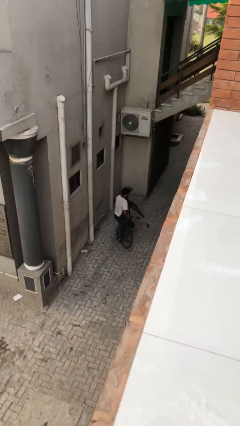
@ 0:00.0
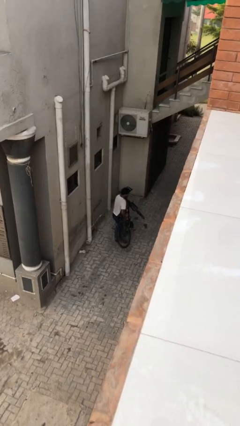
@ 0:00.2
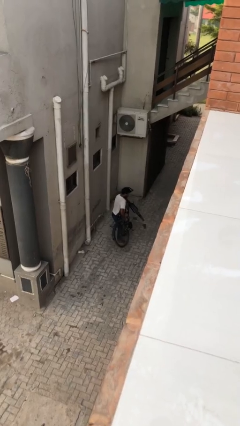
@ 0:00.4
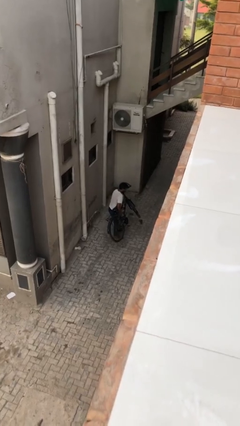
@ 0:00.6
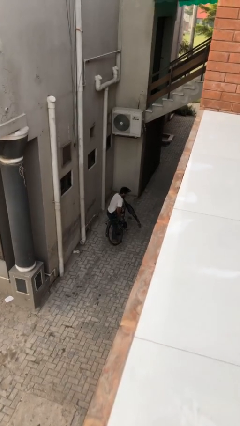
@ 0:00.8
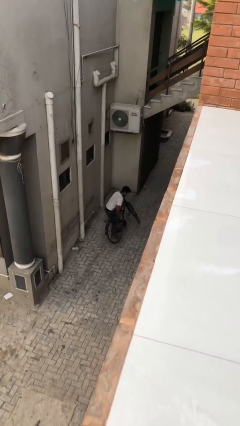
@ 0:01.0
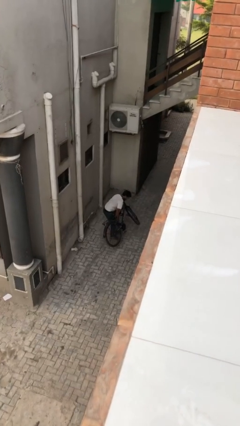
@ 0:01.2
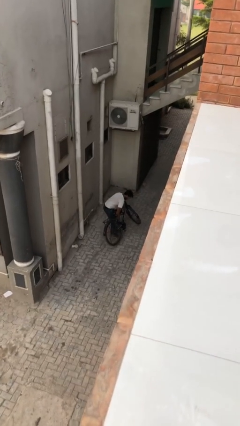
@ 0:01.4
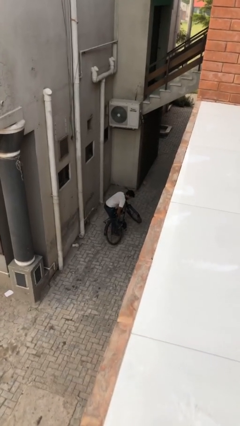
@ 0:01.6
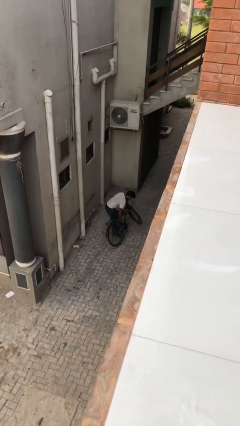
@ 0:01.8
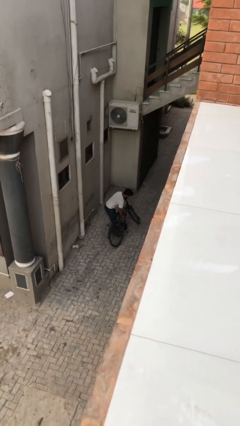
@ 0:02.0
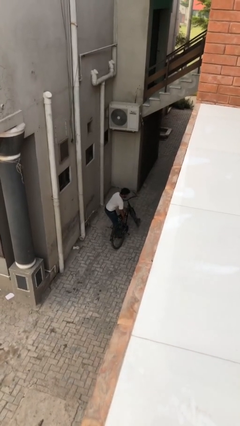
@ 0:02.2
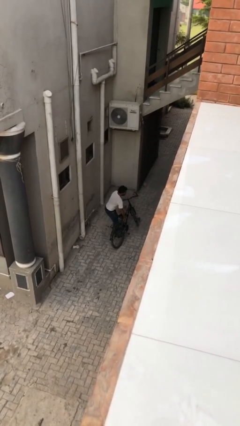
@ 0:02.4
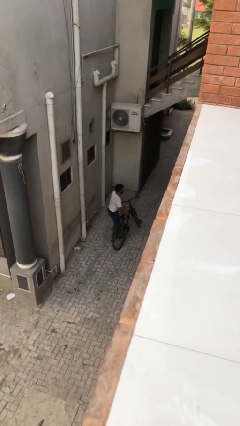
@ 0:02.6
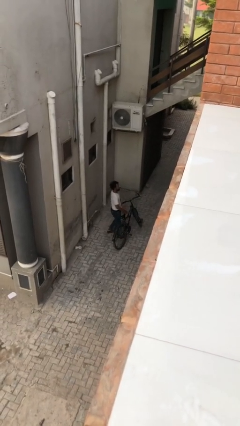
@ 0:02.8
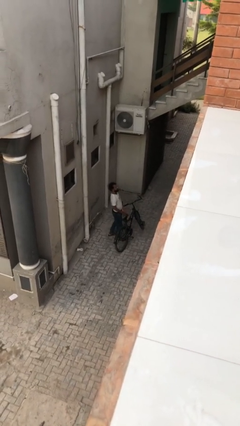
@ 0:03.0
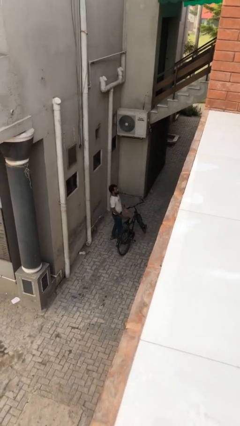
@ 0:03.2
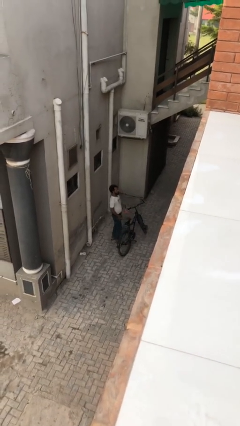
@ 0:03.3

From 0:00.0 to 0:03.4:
person puts down object on floor

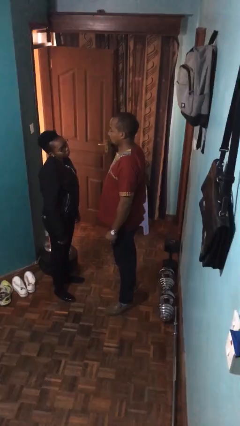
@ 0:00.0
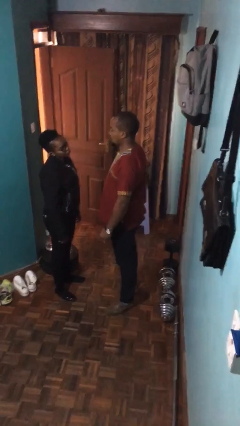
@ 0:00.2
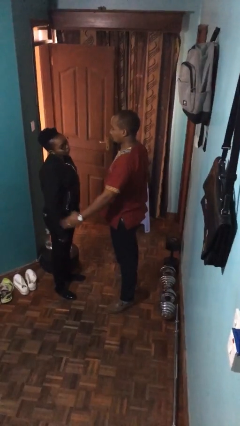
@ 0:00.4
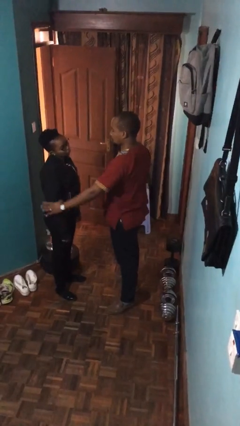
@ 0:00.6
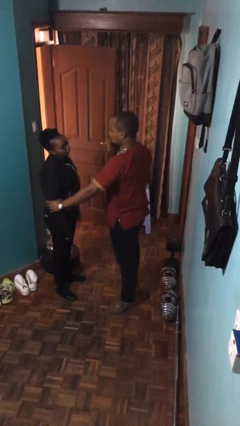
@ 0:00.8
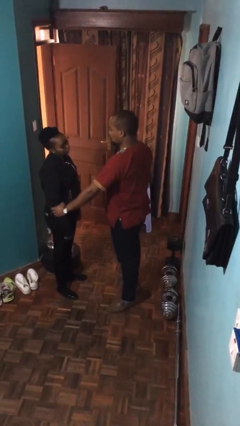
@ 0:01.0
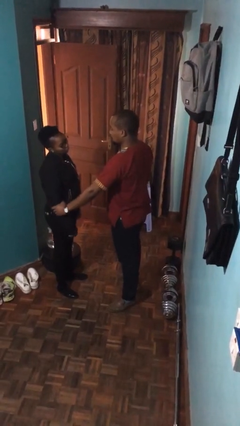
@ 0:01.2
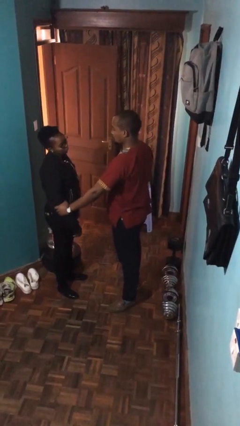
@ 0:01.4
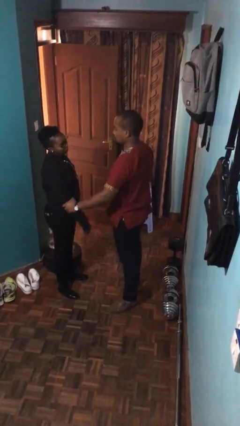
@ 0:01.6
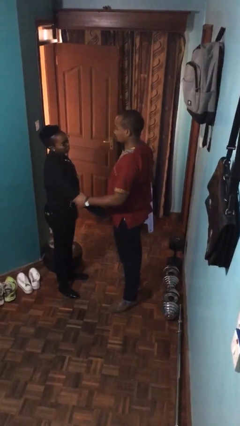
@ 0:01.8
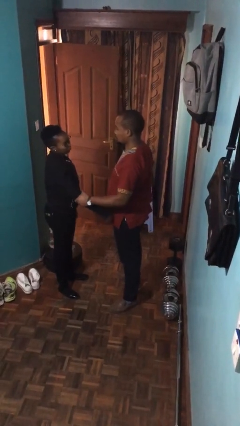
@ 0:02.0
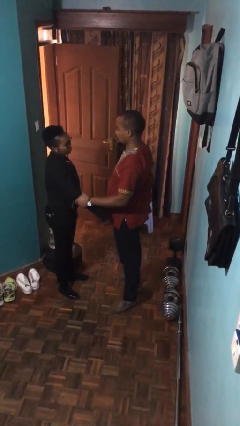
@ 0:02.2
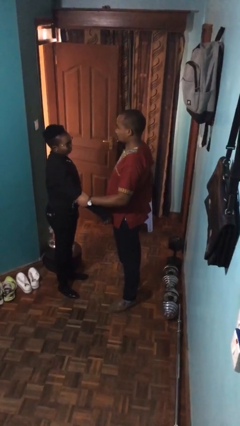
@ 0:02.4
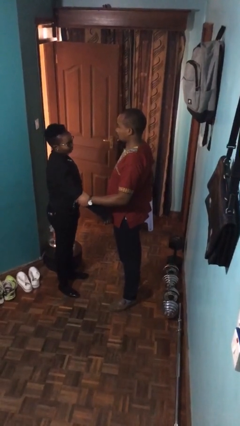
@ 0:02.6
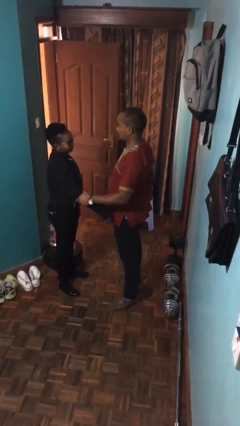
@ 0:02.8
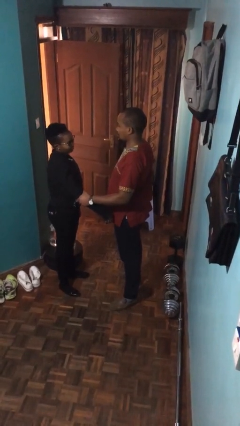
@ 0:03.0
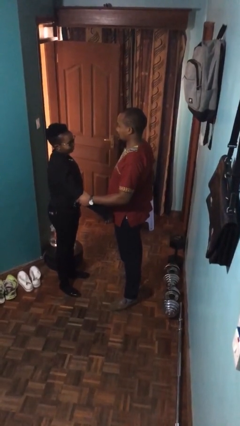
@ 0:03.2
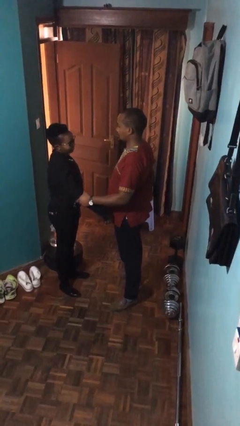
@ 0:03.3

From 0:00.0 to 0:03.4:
person grabs person by forearm

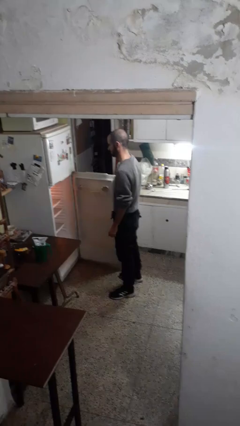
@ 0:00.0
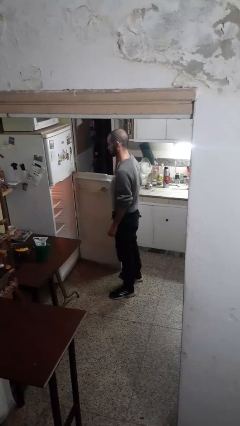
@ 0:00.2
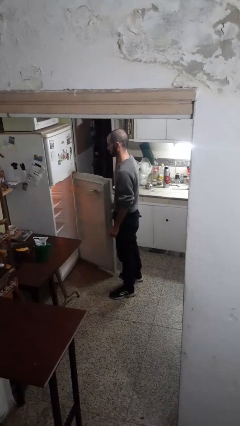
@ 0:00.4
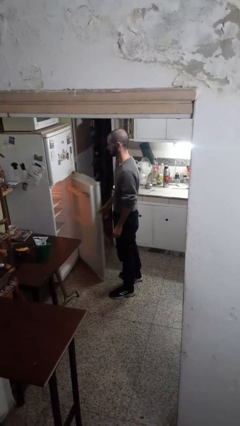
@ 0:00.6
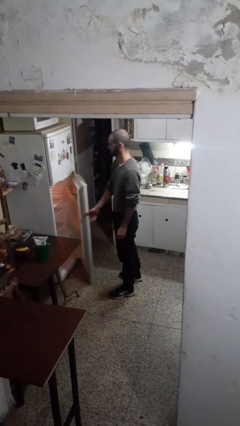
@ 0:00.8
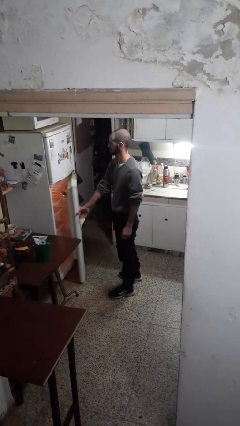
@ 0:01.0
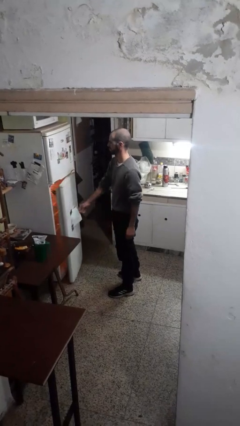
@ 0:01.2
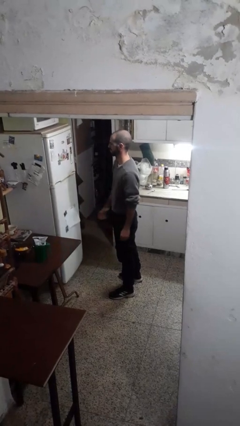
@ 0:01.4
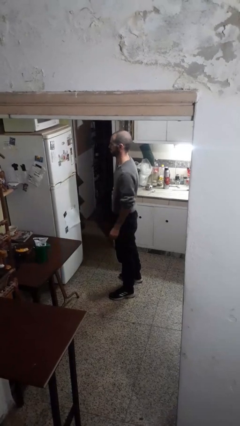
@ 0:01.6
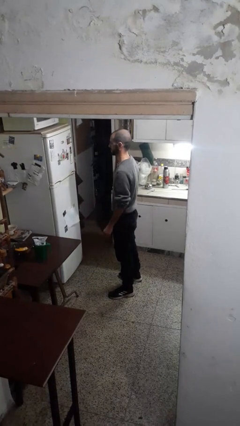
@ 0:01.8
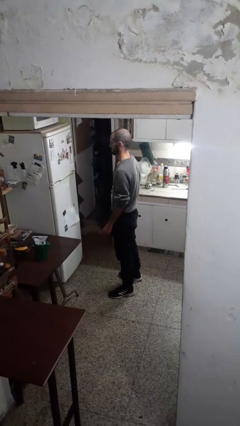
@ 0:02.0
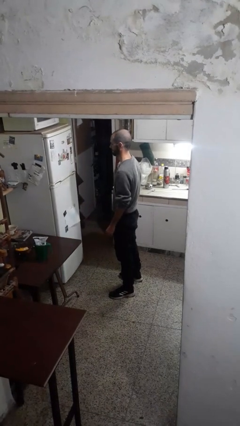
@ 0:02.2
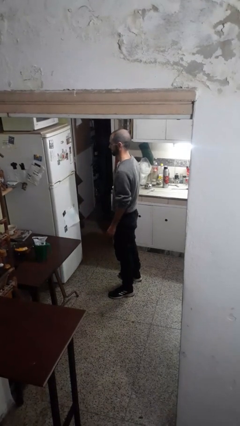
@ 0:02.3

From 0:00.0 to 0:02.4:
person closes refrigerator

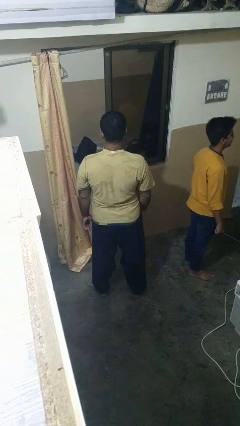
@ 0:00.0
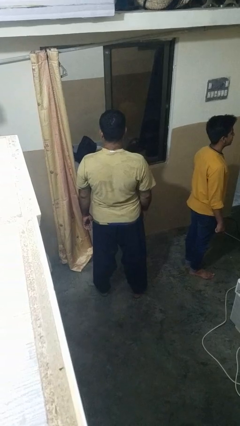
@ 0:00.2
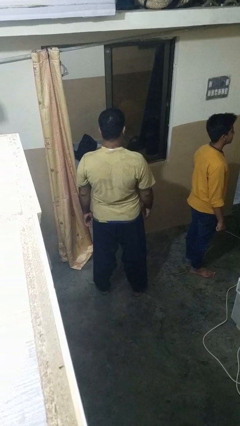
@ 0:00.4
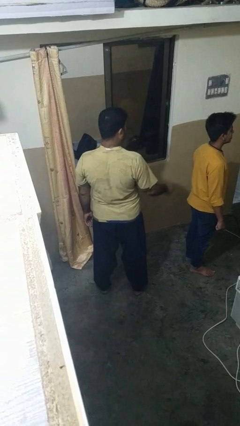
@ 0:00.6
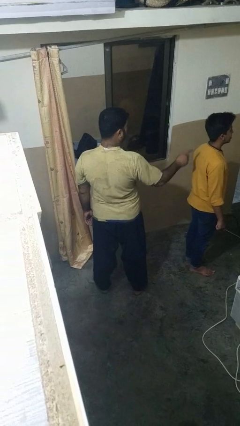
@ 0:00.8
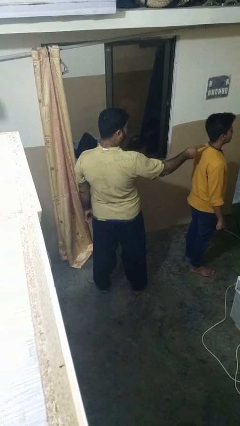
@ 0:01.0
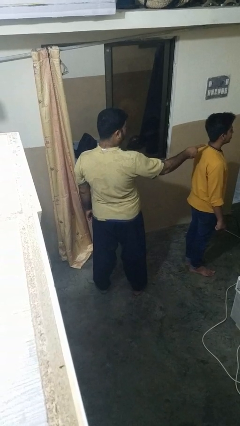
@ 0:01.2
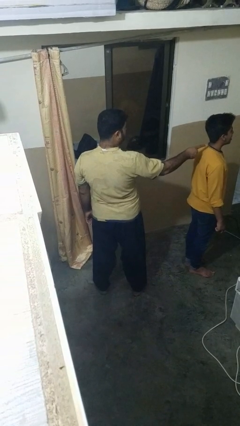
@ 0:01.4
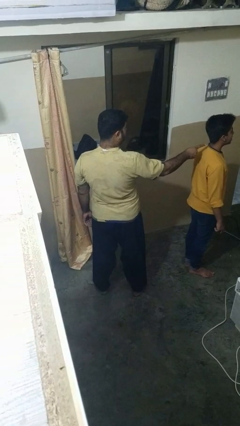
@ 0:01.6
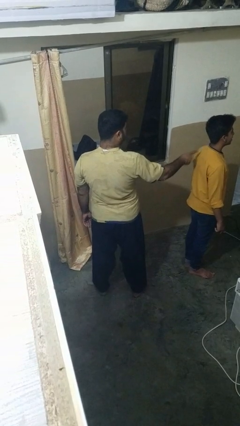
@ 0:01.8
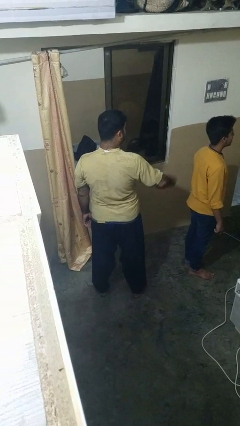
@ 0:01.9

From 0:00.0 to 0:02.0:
person points at person

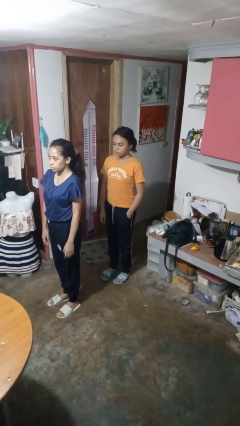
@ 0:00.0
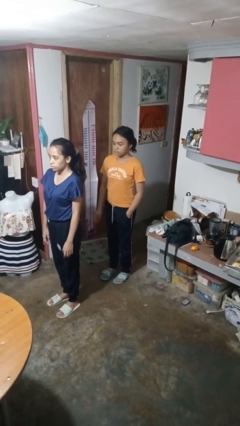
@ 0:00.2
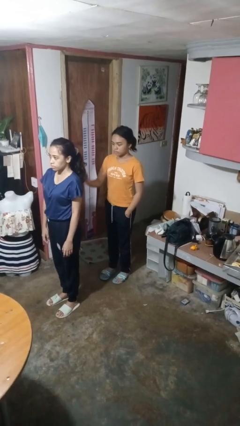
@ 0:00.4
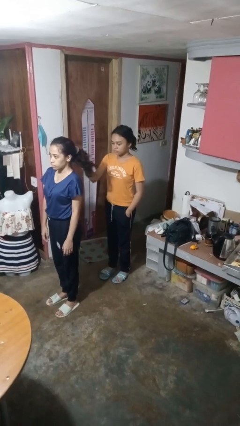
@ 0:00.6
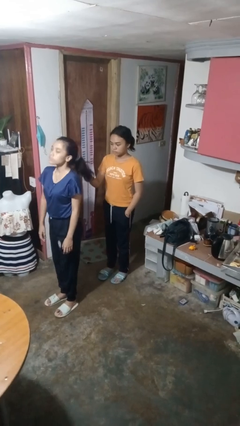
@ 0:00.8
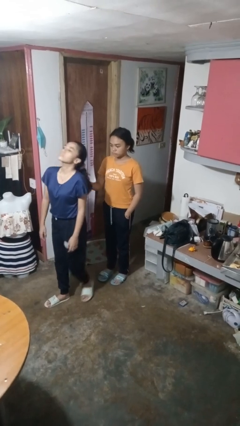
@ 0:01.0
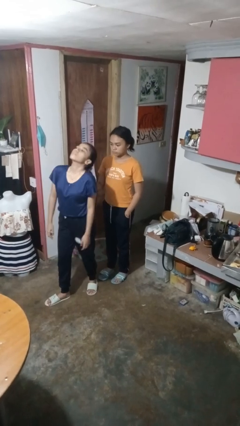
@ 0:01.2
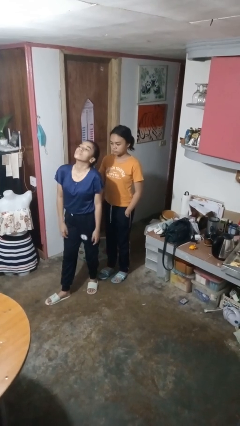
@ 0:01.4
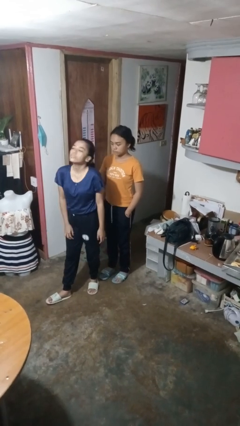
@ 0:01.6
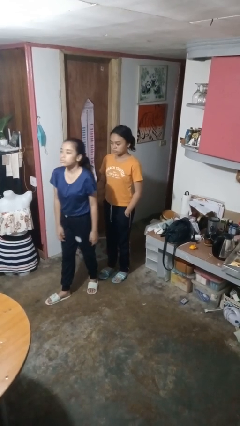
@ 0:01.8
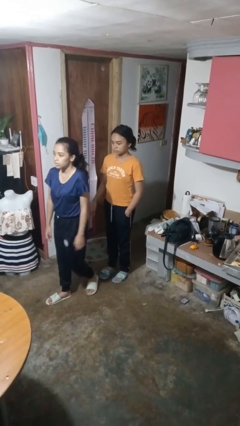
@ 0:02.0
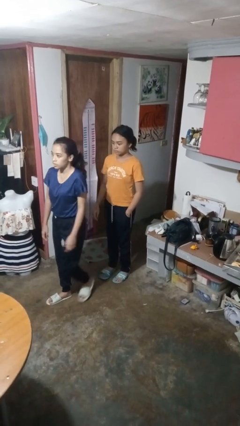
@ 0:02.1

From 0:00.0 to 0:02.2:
person grabs person by hair

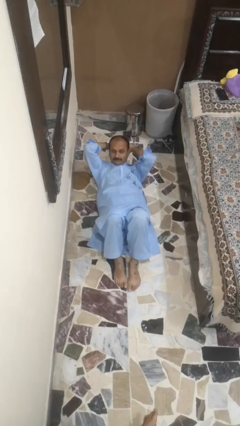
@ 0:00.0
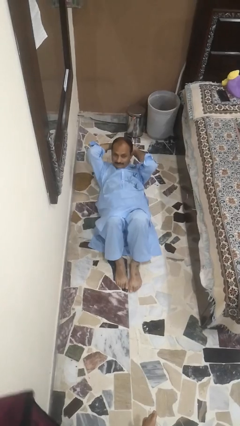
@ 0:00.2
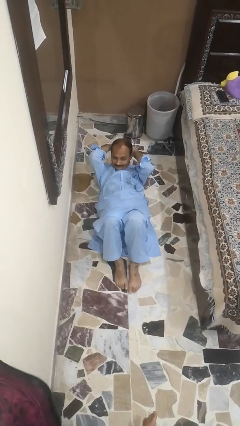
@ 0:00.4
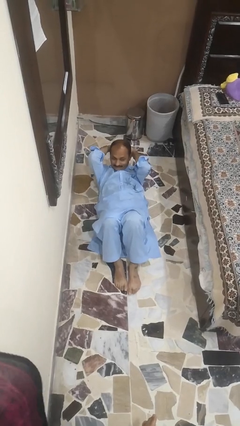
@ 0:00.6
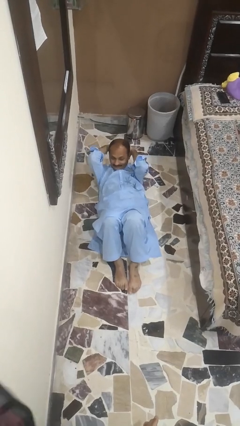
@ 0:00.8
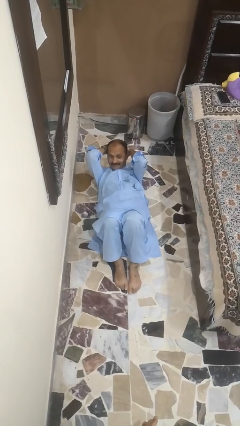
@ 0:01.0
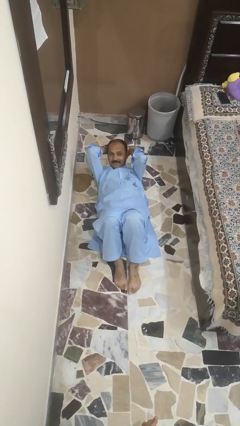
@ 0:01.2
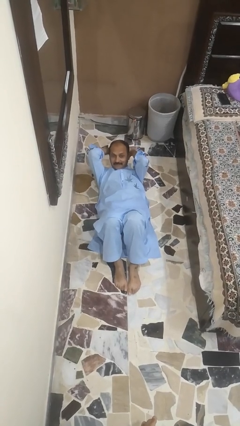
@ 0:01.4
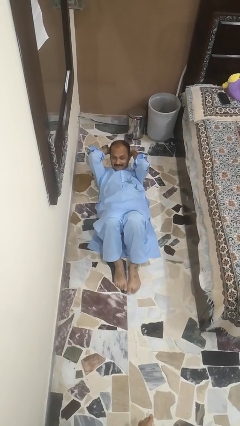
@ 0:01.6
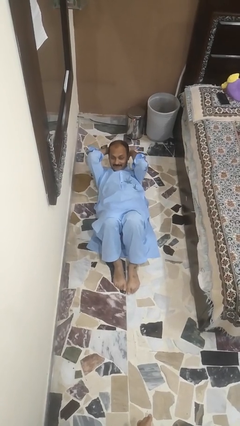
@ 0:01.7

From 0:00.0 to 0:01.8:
person exercises with situp

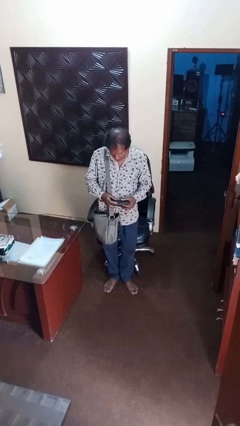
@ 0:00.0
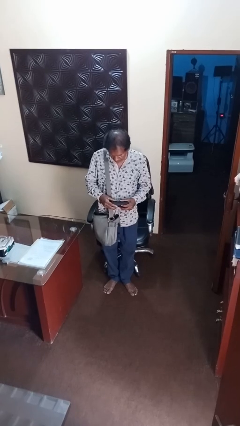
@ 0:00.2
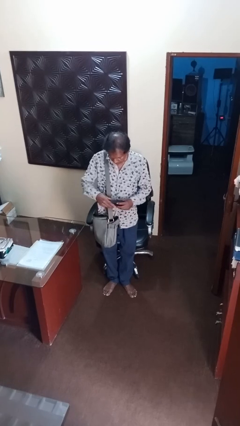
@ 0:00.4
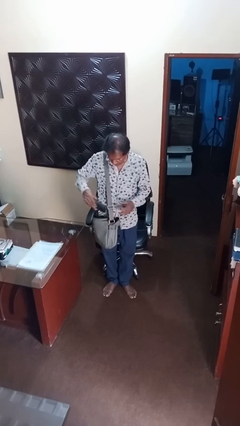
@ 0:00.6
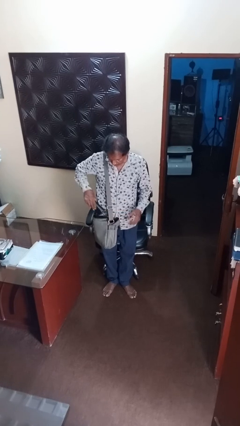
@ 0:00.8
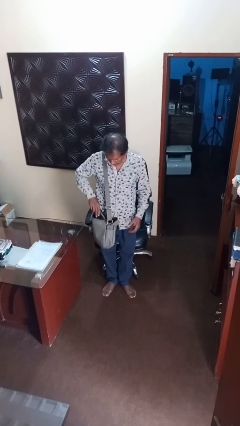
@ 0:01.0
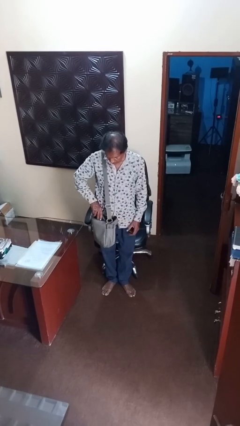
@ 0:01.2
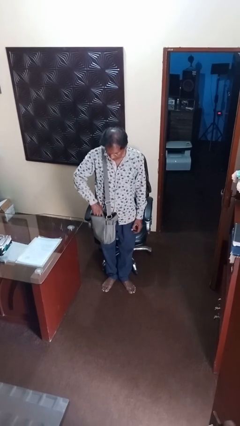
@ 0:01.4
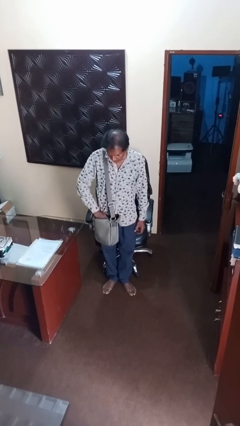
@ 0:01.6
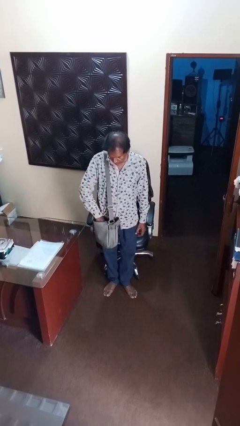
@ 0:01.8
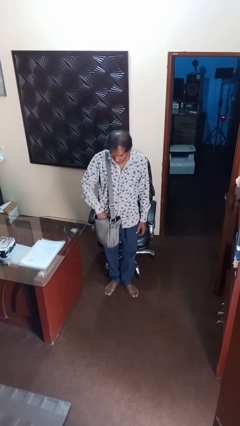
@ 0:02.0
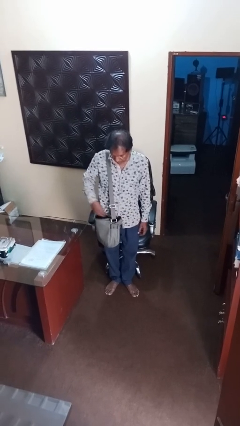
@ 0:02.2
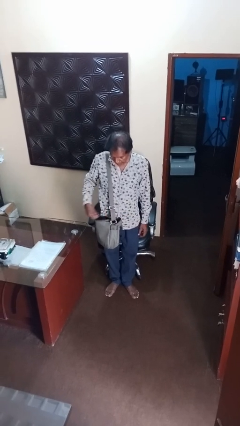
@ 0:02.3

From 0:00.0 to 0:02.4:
person puts object into backpack
